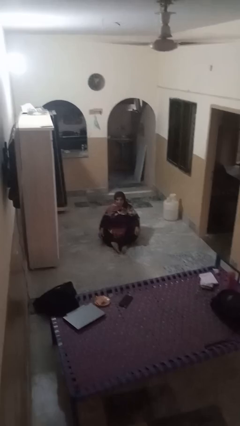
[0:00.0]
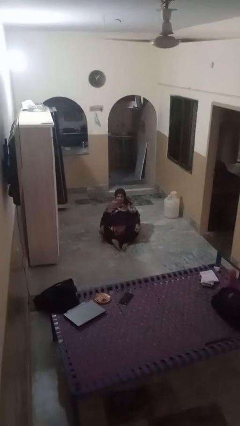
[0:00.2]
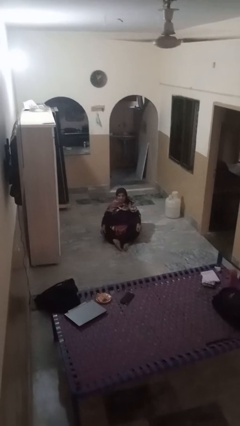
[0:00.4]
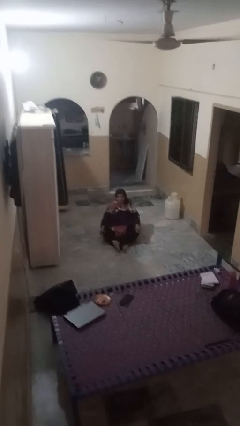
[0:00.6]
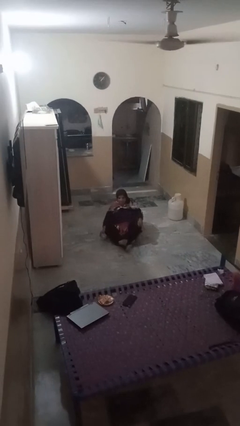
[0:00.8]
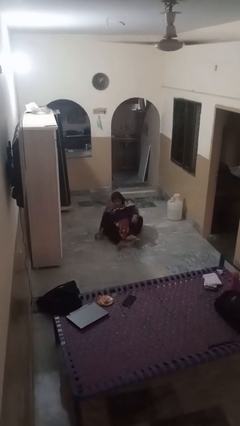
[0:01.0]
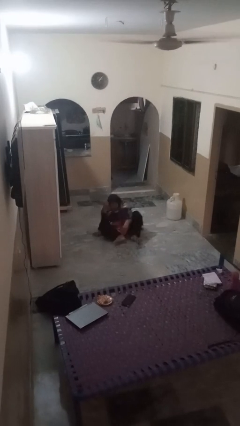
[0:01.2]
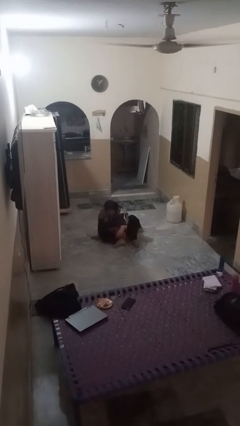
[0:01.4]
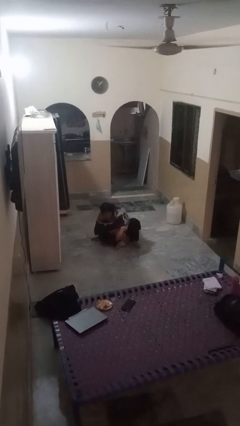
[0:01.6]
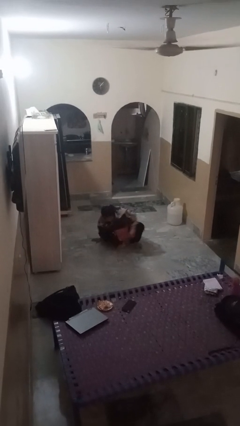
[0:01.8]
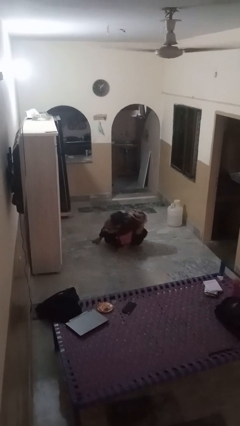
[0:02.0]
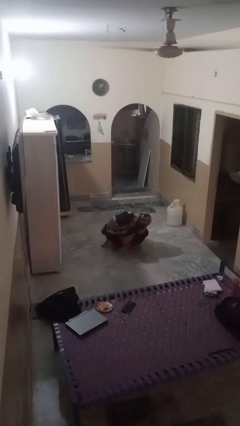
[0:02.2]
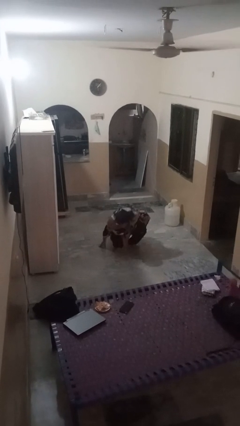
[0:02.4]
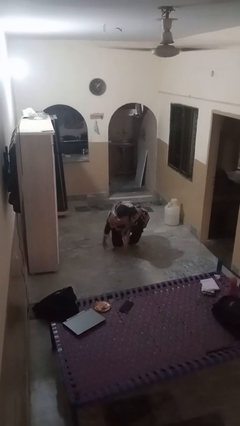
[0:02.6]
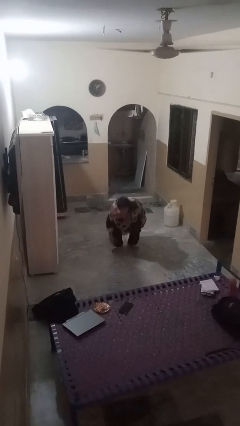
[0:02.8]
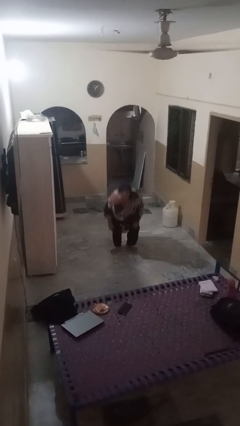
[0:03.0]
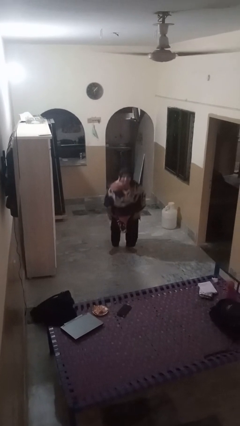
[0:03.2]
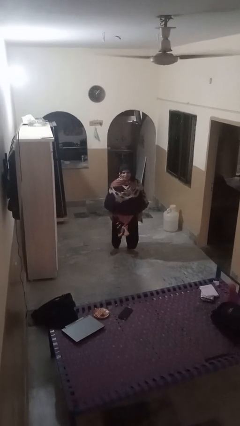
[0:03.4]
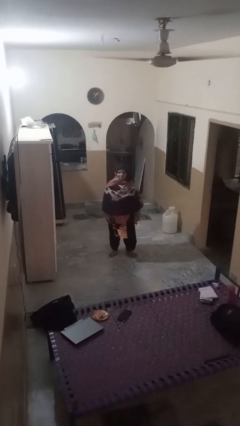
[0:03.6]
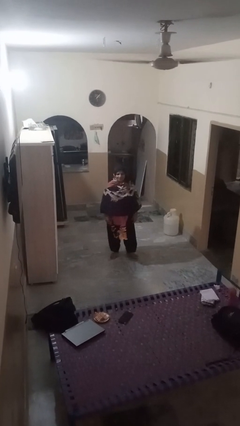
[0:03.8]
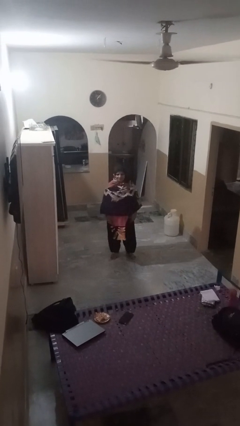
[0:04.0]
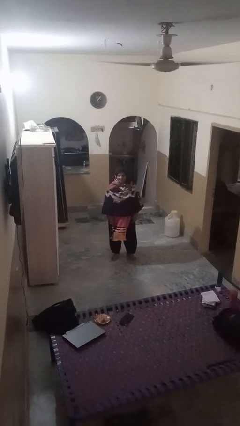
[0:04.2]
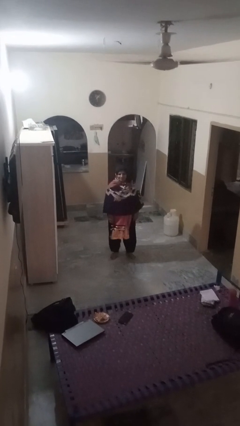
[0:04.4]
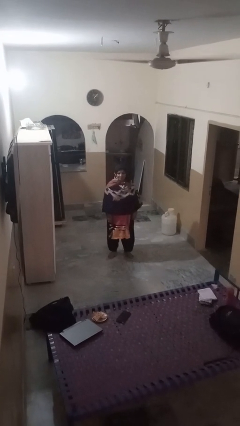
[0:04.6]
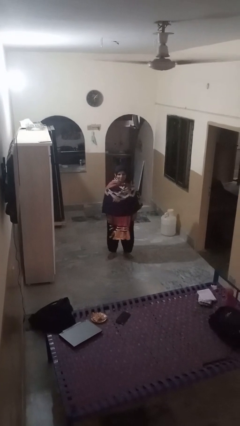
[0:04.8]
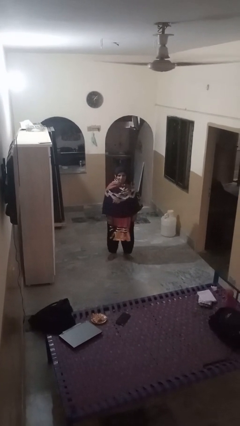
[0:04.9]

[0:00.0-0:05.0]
person stands up from floor

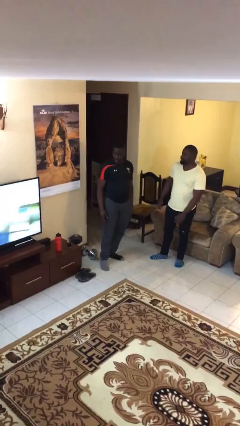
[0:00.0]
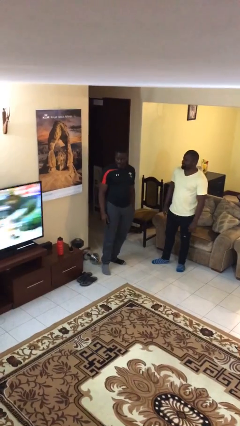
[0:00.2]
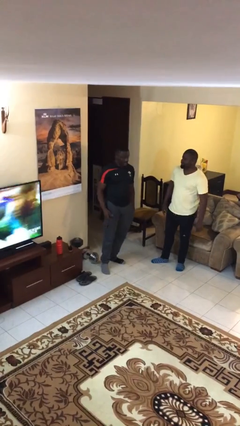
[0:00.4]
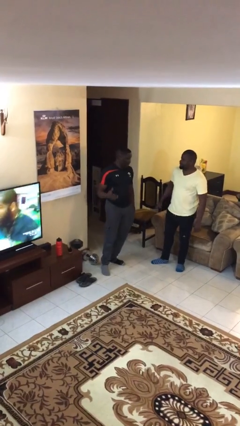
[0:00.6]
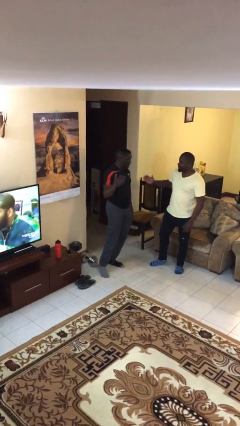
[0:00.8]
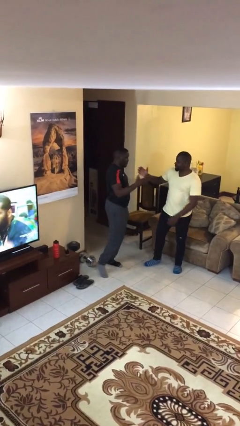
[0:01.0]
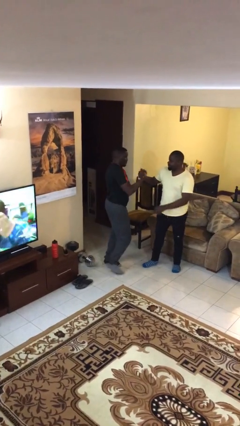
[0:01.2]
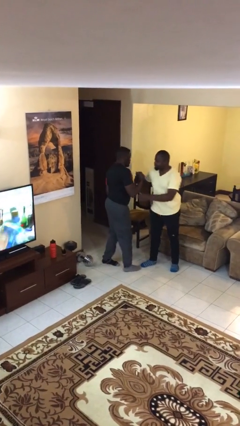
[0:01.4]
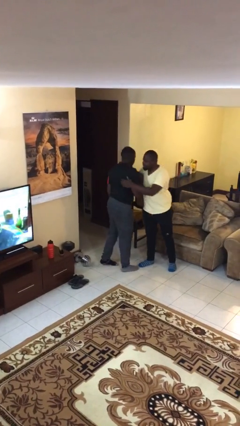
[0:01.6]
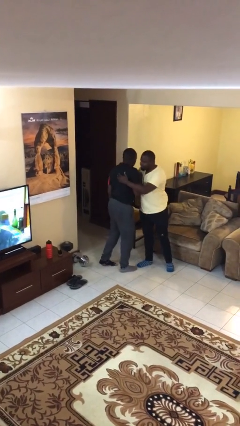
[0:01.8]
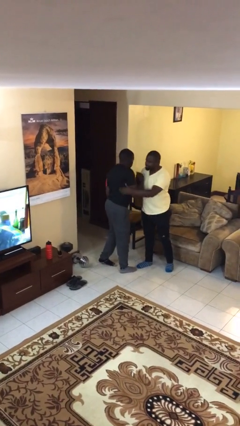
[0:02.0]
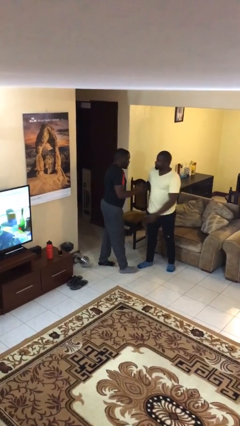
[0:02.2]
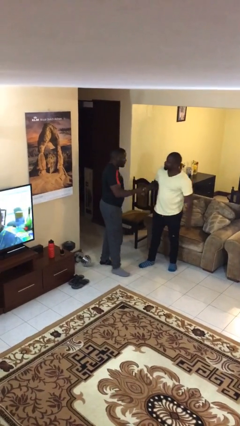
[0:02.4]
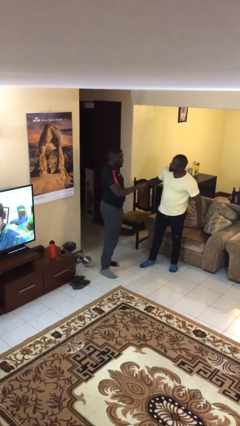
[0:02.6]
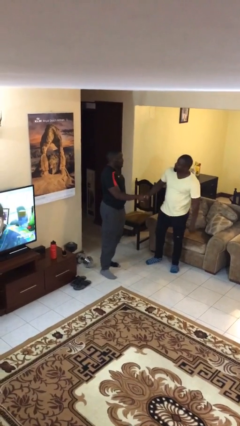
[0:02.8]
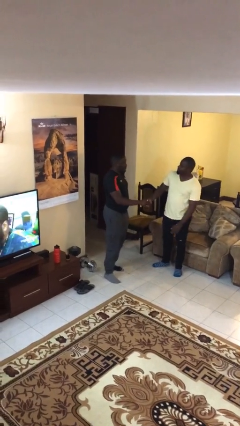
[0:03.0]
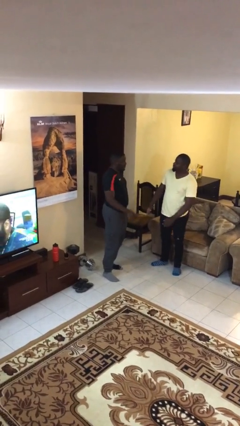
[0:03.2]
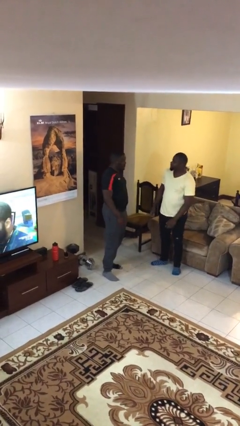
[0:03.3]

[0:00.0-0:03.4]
person embraces person

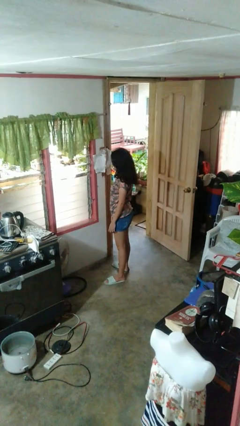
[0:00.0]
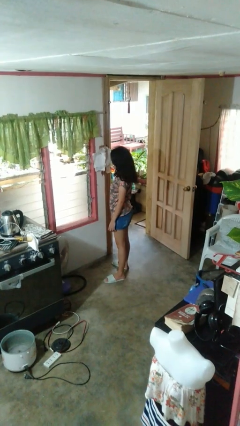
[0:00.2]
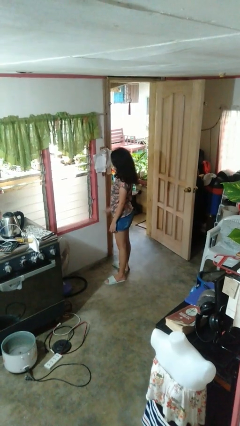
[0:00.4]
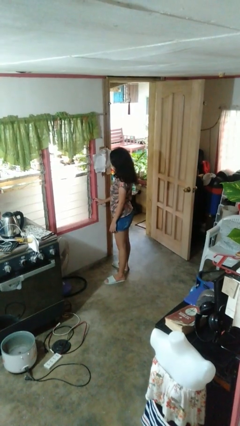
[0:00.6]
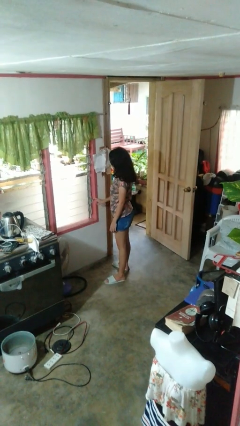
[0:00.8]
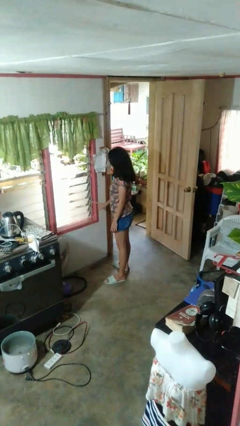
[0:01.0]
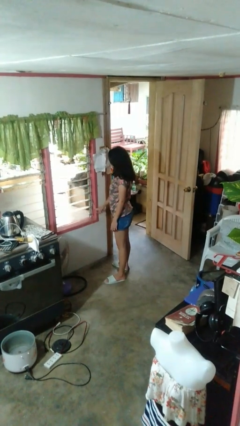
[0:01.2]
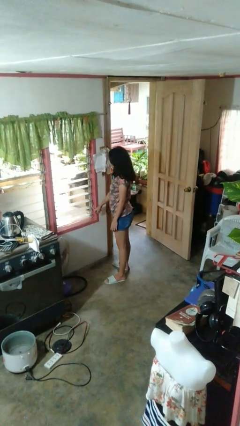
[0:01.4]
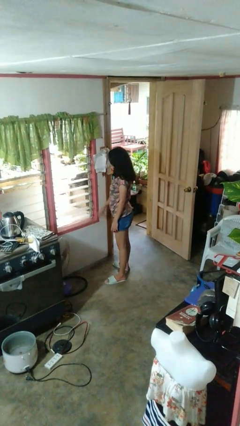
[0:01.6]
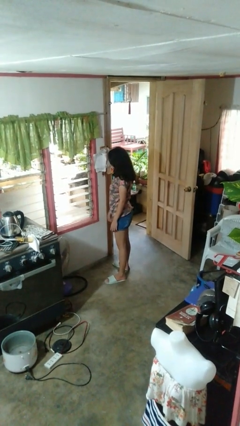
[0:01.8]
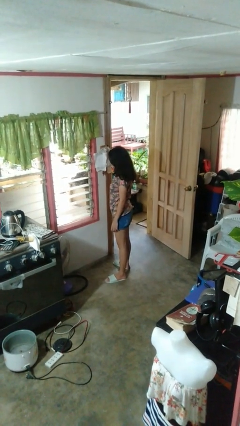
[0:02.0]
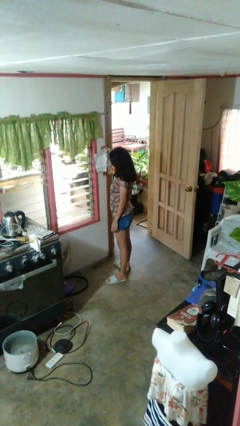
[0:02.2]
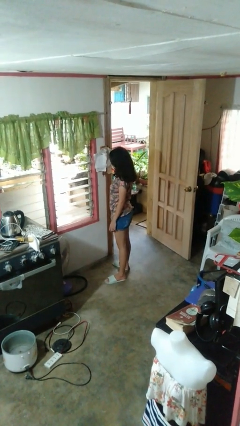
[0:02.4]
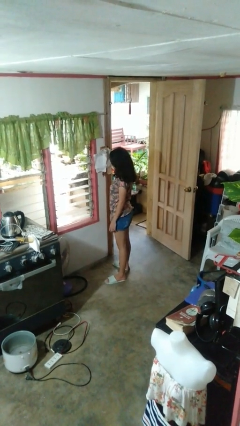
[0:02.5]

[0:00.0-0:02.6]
person opens home window

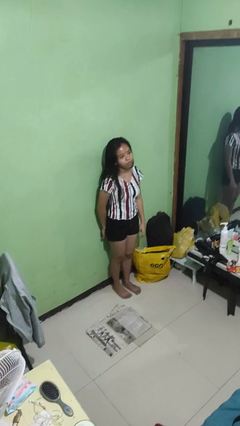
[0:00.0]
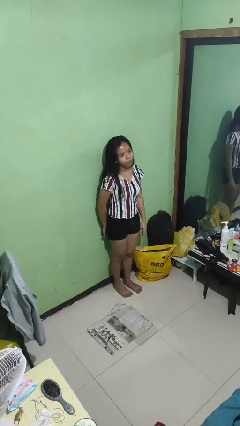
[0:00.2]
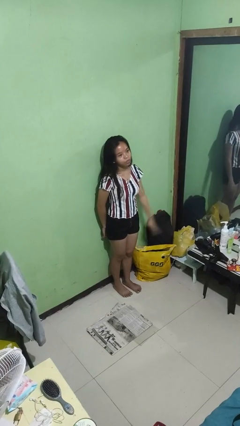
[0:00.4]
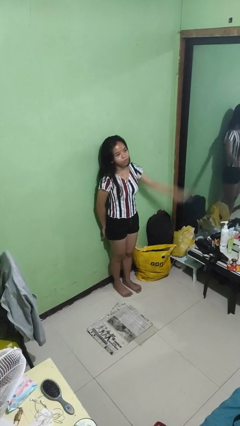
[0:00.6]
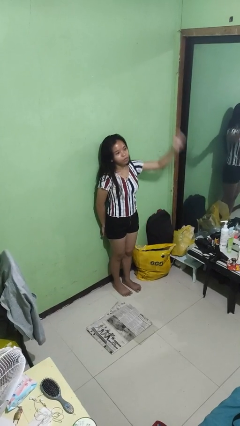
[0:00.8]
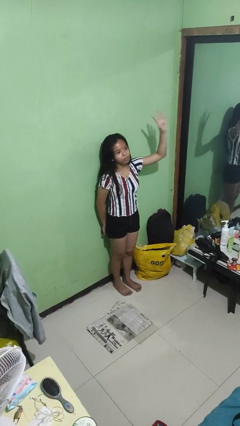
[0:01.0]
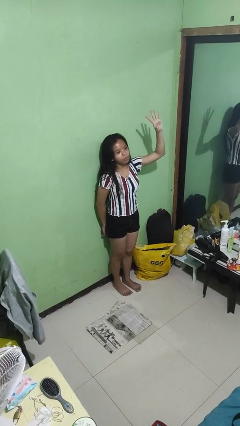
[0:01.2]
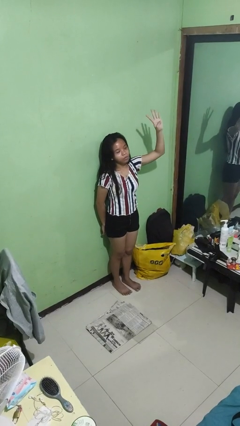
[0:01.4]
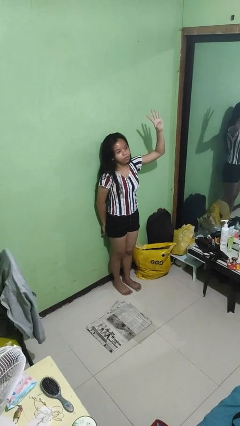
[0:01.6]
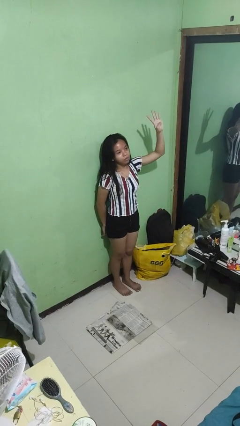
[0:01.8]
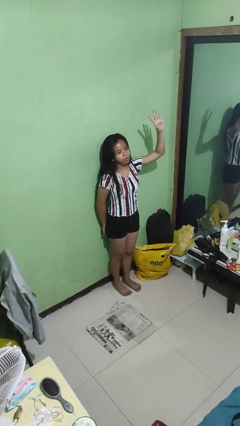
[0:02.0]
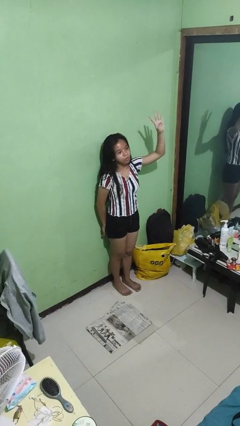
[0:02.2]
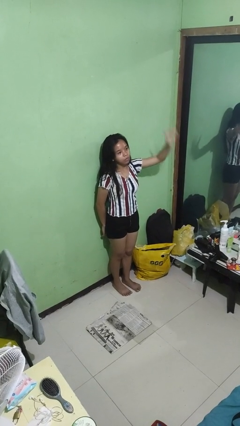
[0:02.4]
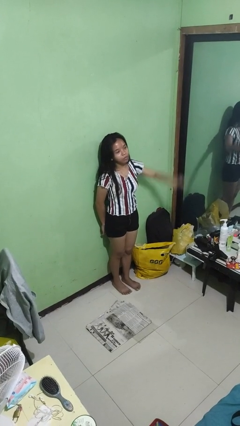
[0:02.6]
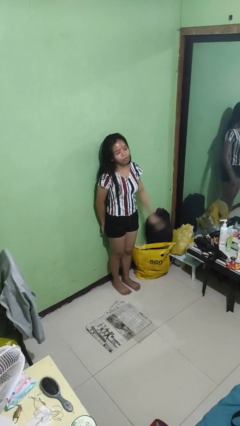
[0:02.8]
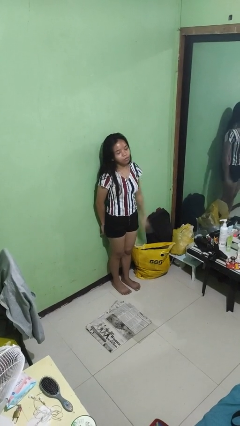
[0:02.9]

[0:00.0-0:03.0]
person gestures number four

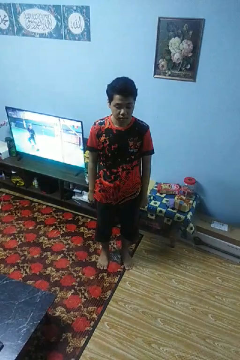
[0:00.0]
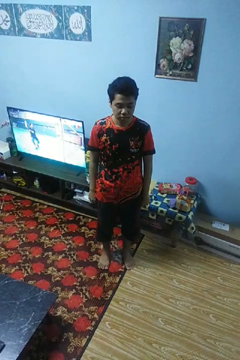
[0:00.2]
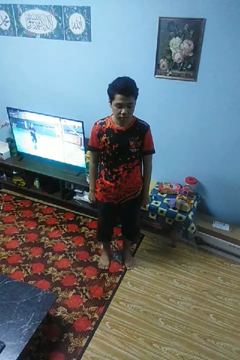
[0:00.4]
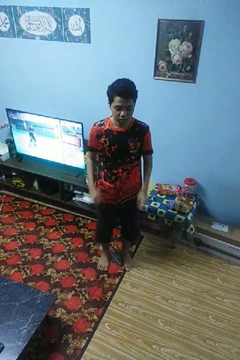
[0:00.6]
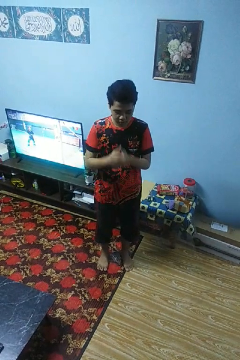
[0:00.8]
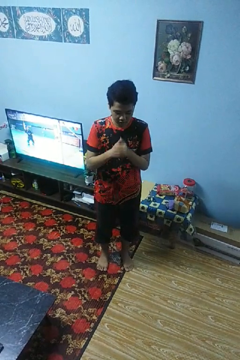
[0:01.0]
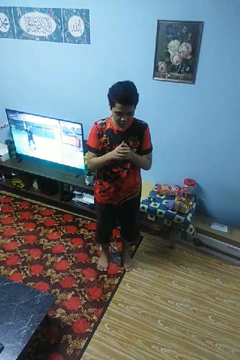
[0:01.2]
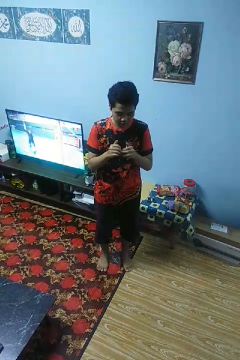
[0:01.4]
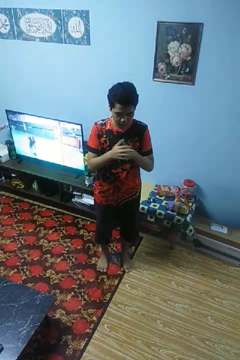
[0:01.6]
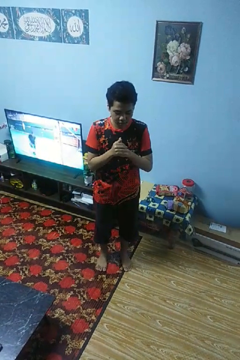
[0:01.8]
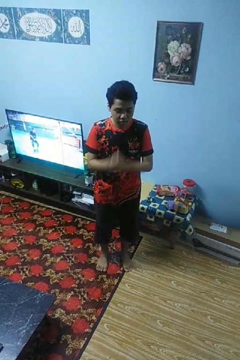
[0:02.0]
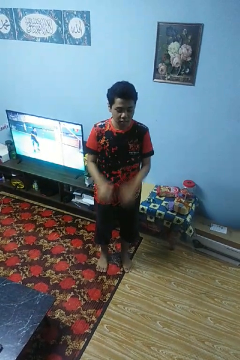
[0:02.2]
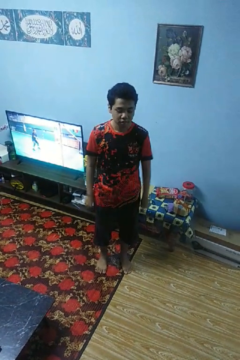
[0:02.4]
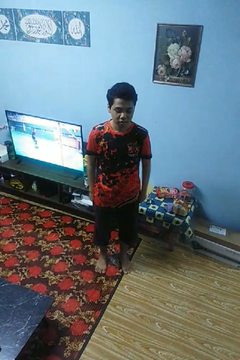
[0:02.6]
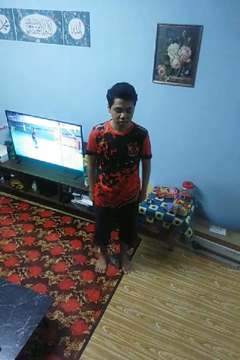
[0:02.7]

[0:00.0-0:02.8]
person cracks knuckles

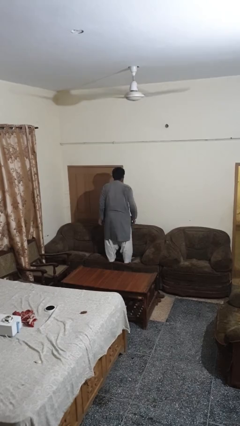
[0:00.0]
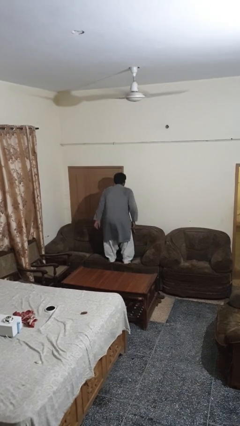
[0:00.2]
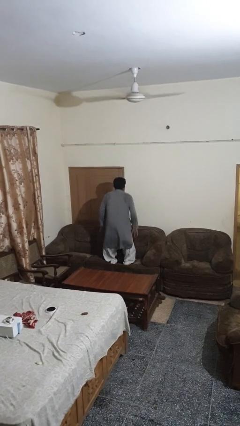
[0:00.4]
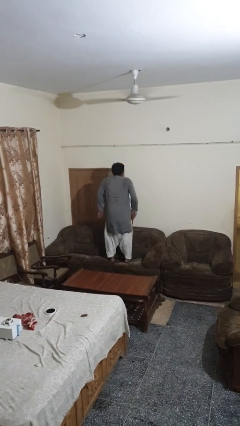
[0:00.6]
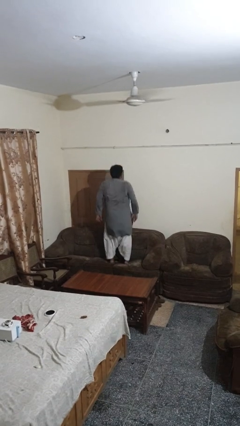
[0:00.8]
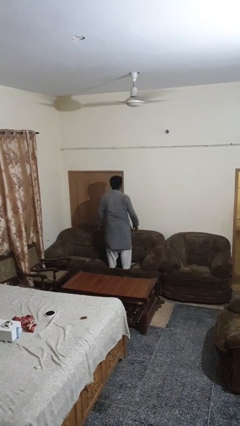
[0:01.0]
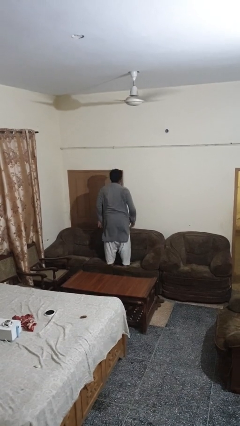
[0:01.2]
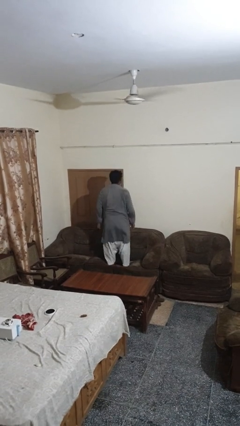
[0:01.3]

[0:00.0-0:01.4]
person jumps on couch
